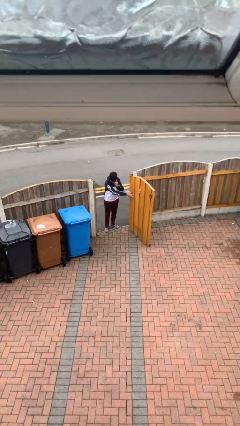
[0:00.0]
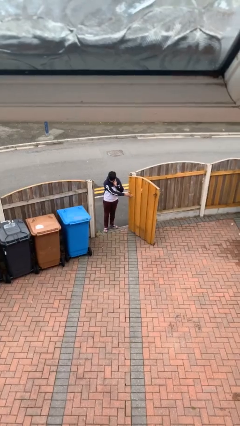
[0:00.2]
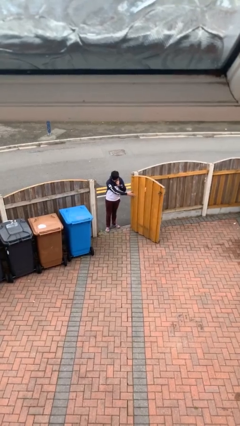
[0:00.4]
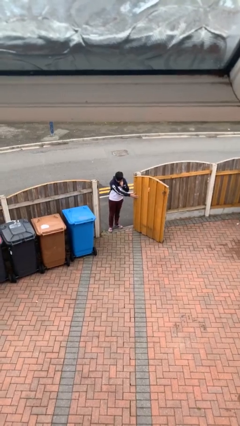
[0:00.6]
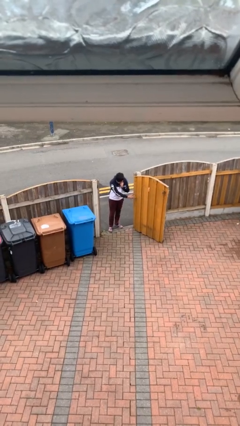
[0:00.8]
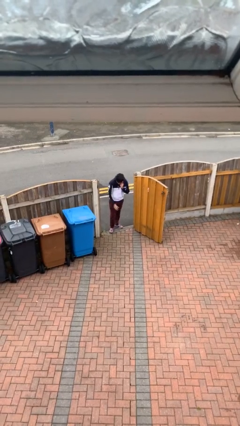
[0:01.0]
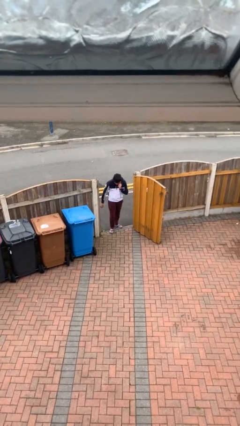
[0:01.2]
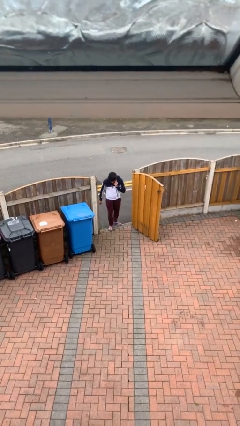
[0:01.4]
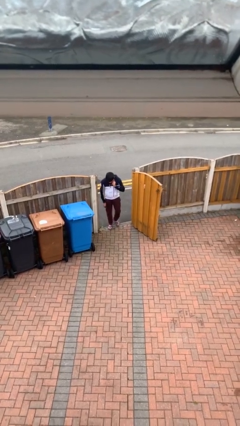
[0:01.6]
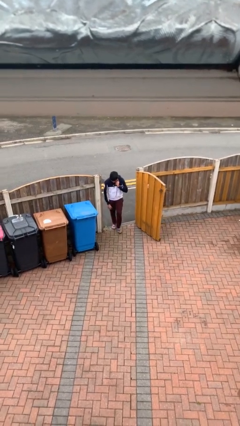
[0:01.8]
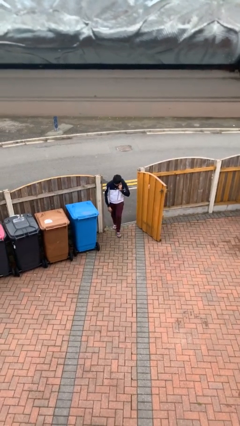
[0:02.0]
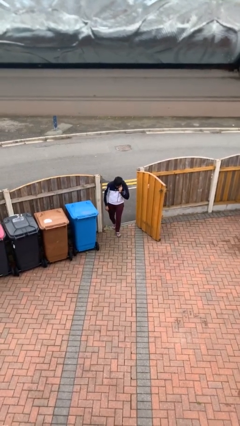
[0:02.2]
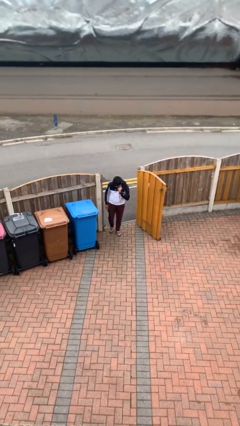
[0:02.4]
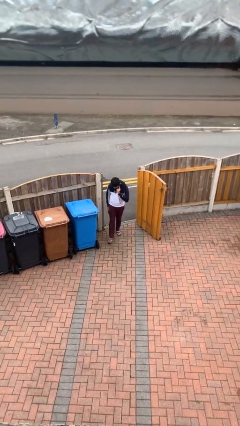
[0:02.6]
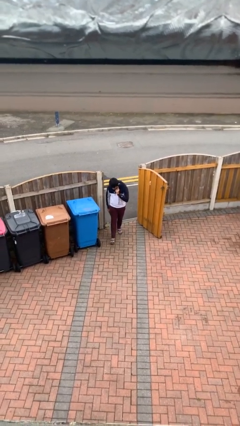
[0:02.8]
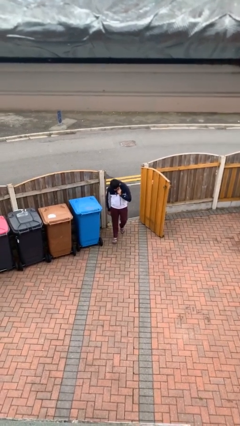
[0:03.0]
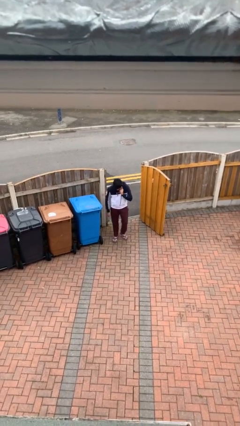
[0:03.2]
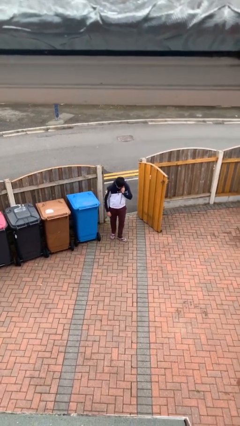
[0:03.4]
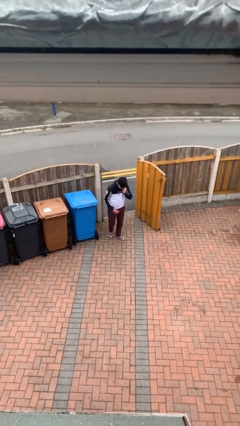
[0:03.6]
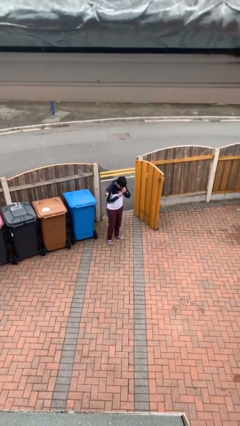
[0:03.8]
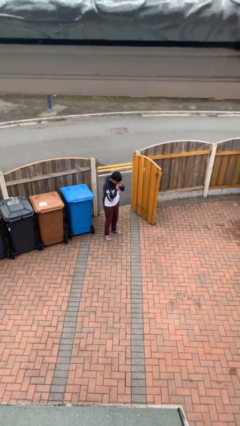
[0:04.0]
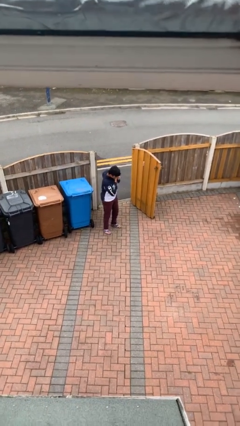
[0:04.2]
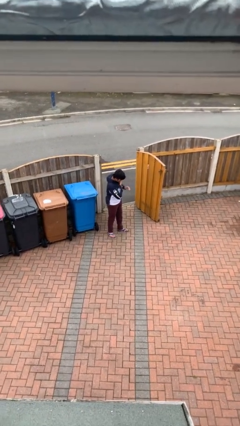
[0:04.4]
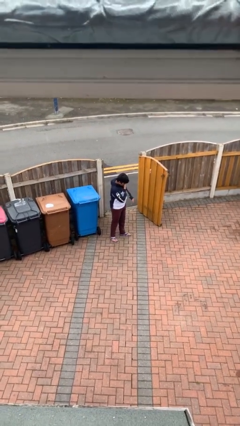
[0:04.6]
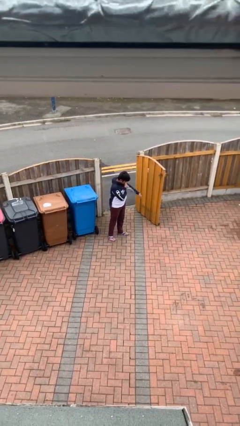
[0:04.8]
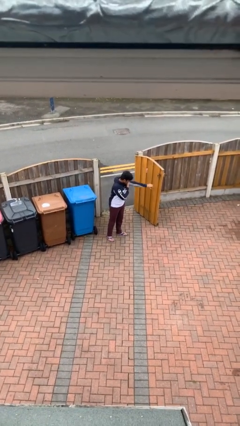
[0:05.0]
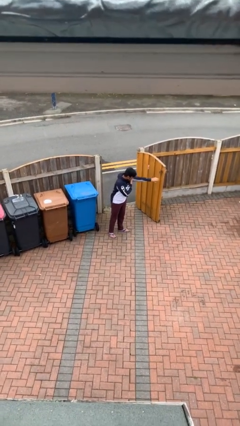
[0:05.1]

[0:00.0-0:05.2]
person enters scene through structure

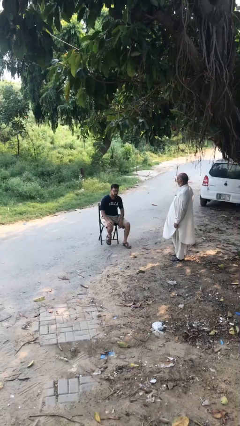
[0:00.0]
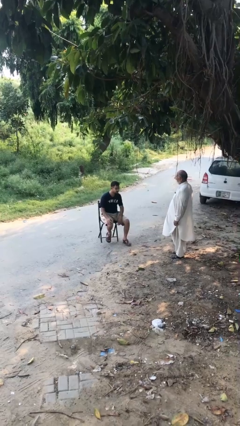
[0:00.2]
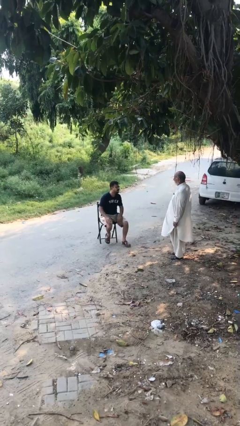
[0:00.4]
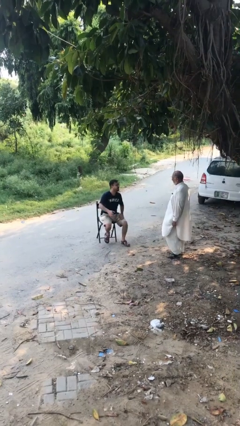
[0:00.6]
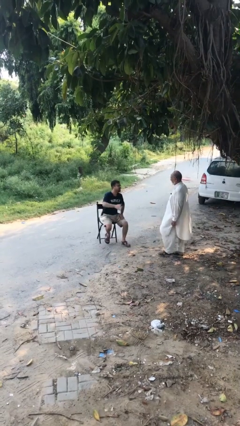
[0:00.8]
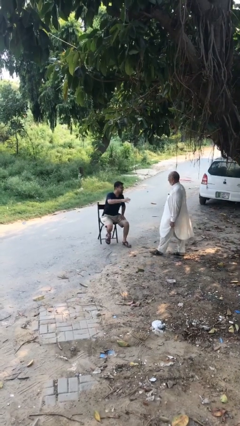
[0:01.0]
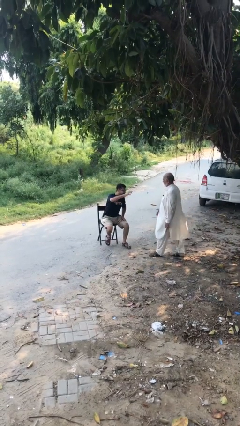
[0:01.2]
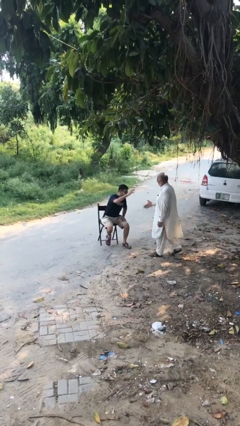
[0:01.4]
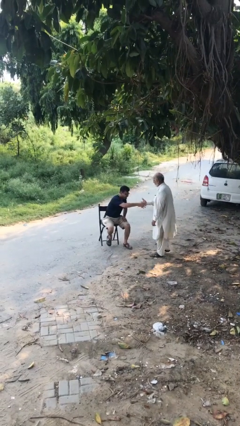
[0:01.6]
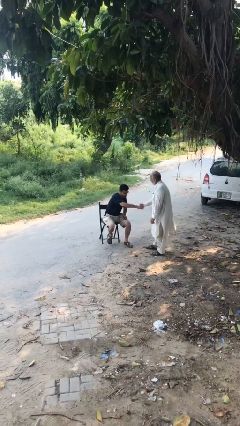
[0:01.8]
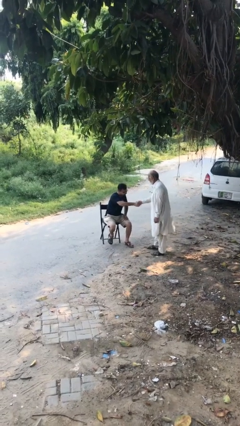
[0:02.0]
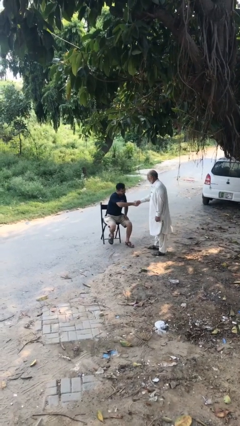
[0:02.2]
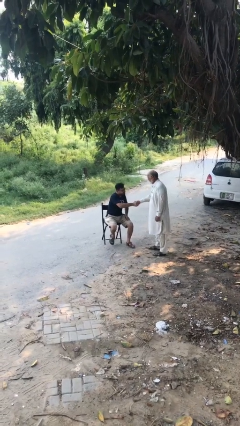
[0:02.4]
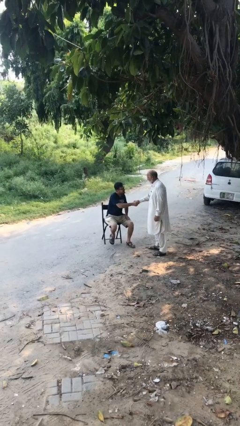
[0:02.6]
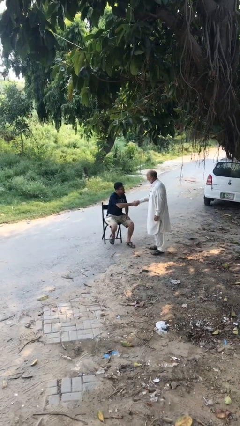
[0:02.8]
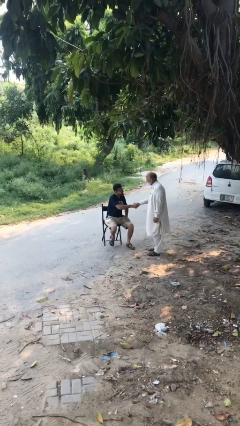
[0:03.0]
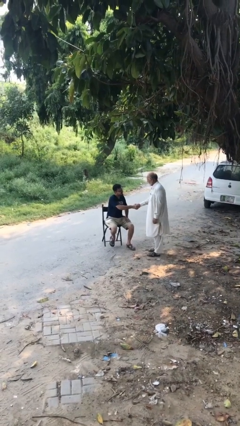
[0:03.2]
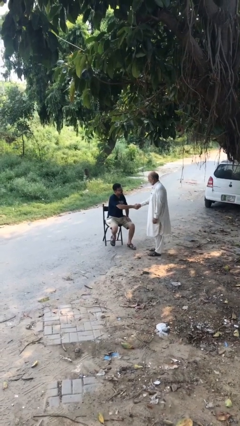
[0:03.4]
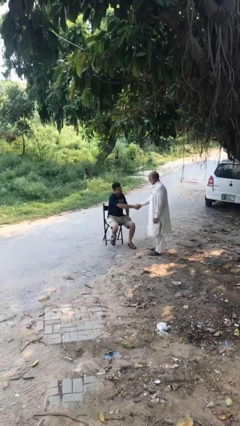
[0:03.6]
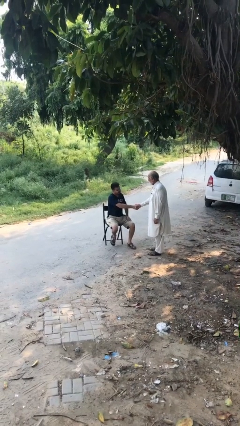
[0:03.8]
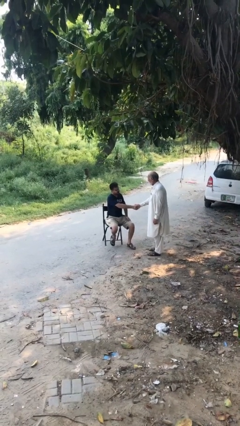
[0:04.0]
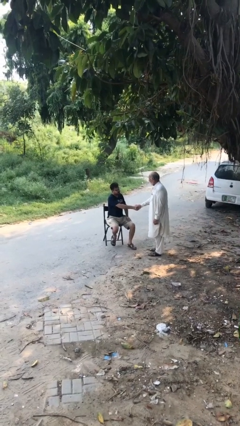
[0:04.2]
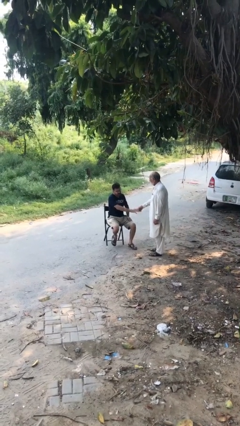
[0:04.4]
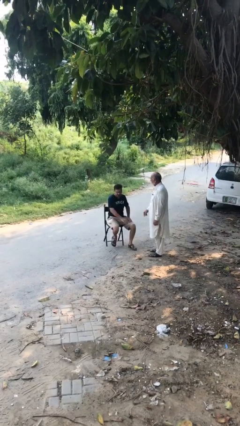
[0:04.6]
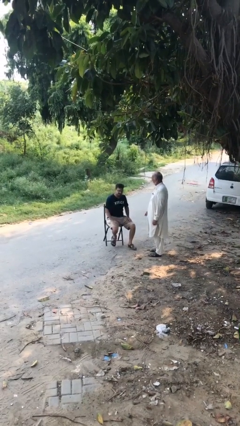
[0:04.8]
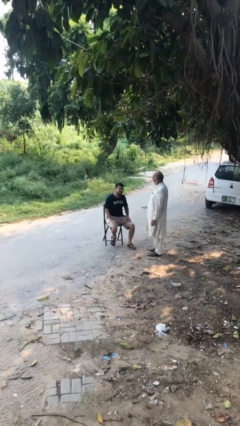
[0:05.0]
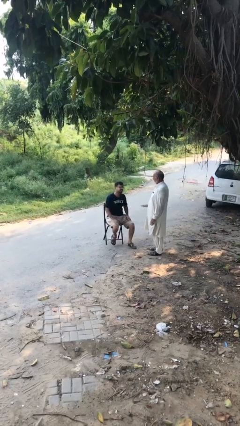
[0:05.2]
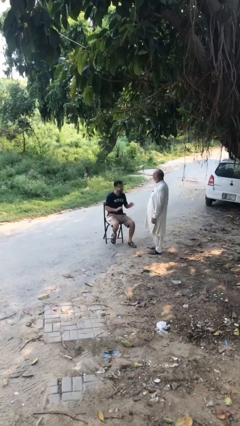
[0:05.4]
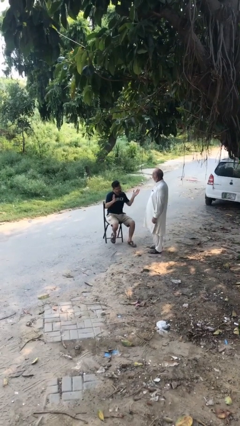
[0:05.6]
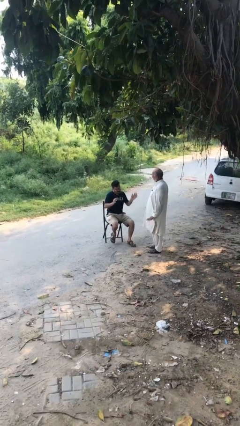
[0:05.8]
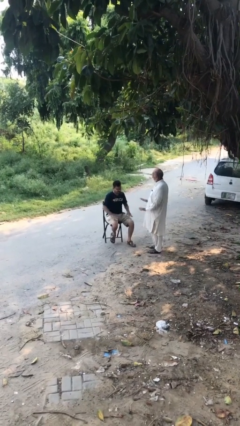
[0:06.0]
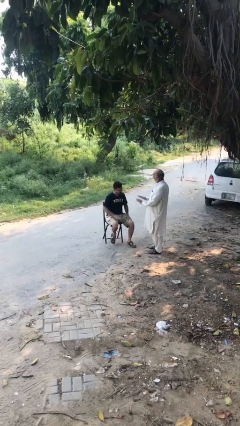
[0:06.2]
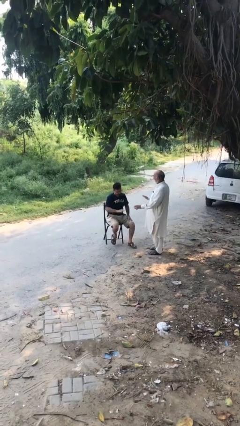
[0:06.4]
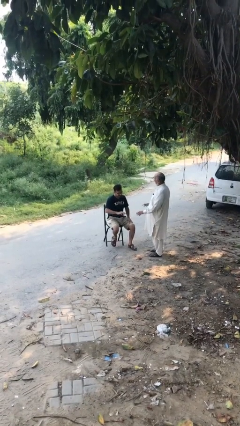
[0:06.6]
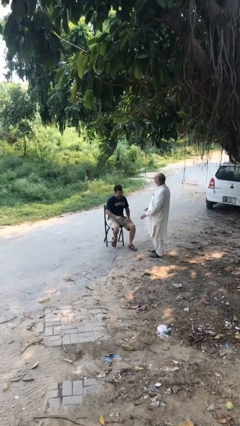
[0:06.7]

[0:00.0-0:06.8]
person shakes hand

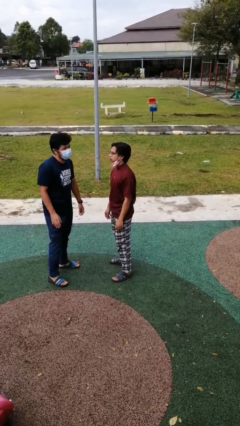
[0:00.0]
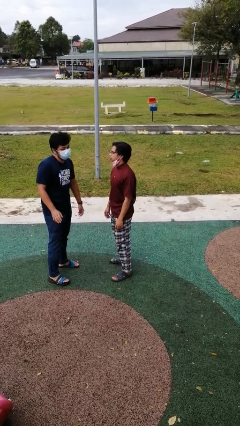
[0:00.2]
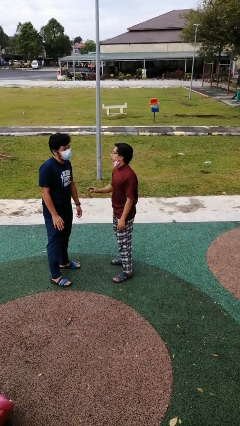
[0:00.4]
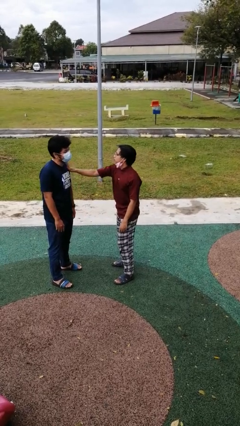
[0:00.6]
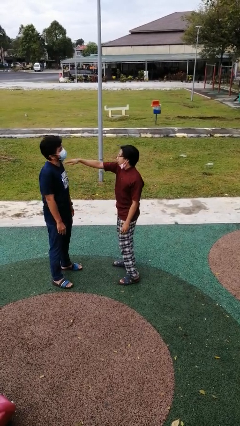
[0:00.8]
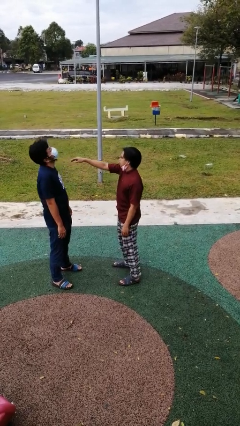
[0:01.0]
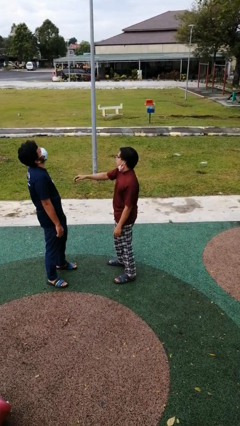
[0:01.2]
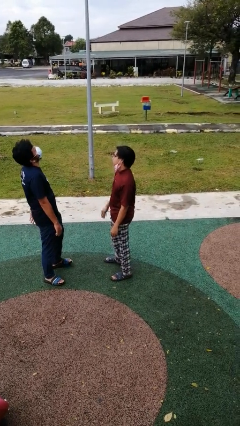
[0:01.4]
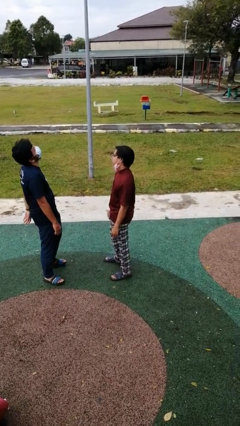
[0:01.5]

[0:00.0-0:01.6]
person shoves person

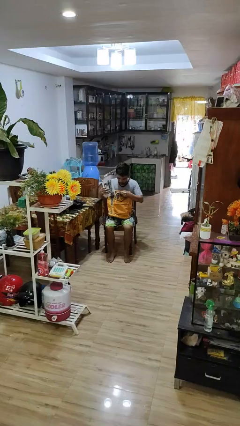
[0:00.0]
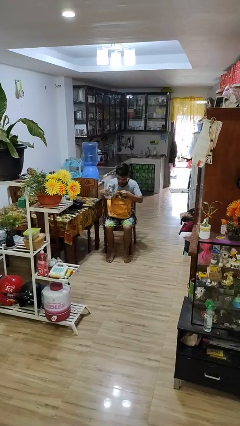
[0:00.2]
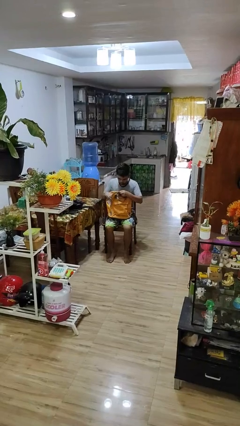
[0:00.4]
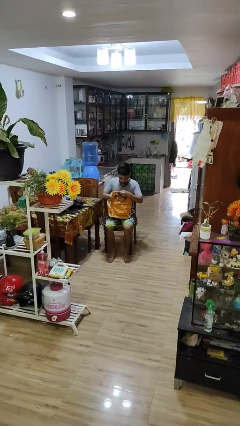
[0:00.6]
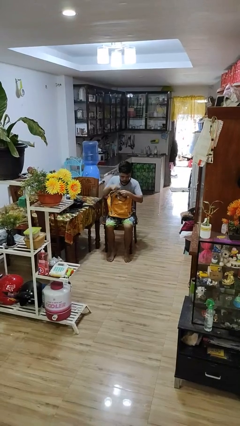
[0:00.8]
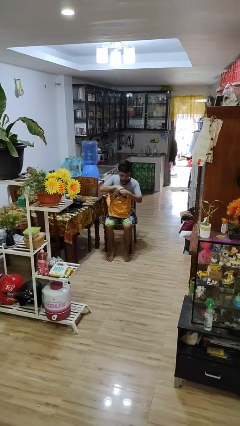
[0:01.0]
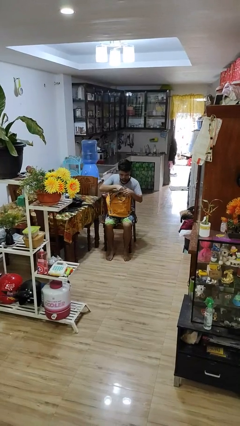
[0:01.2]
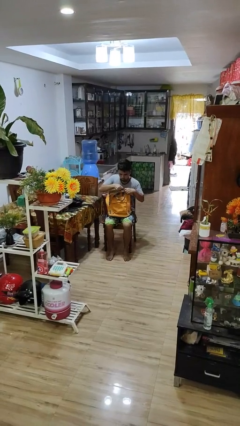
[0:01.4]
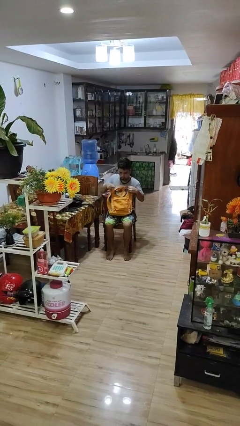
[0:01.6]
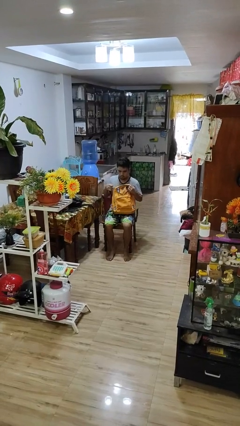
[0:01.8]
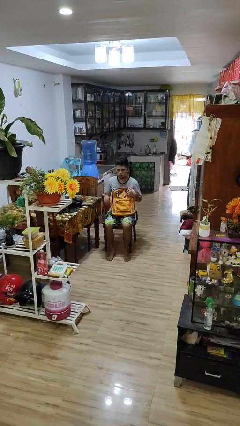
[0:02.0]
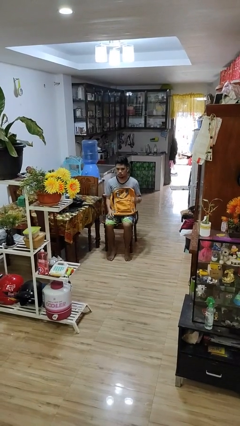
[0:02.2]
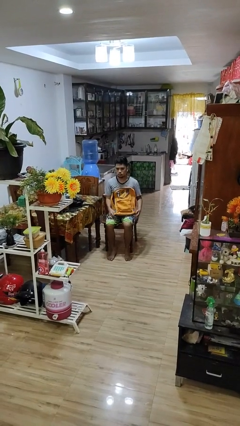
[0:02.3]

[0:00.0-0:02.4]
person puts object into backpack

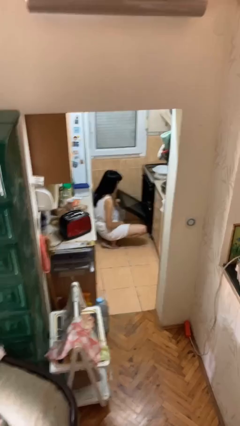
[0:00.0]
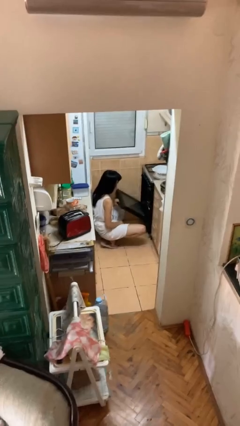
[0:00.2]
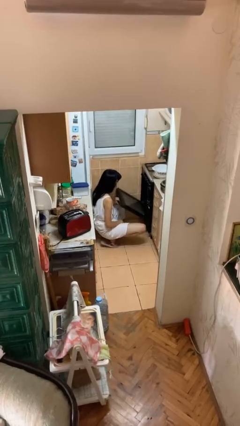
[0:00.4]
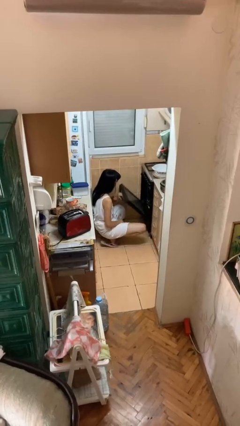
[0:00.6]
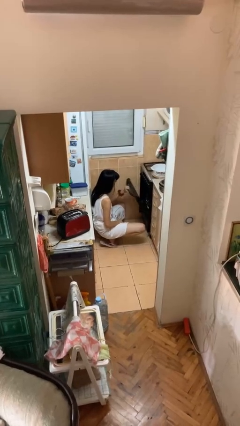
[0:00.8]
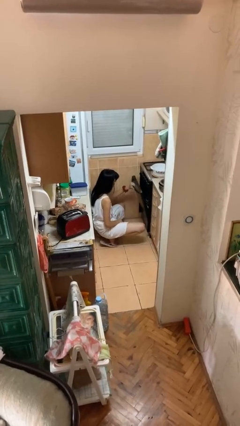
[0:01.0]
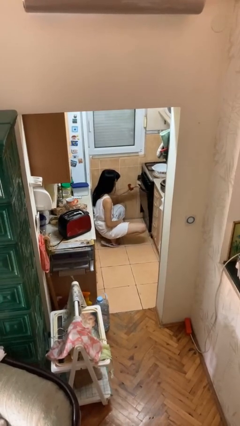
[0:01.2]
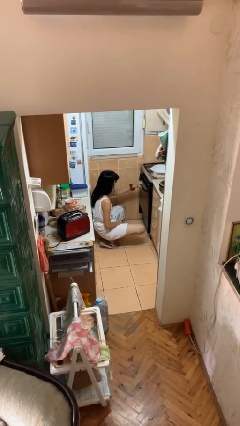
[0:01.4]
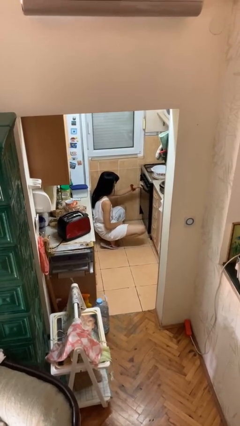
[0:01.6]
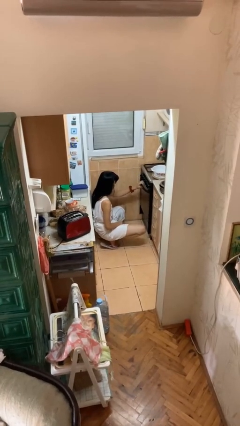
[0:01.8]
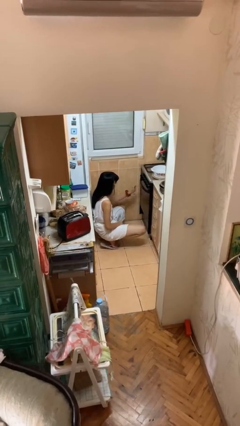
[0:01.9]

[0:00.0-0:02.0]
person closes oven door
